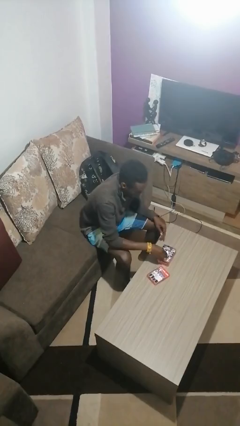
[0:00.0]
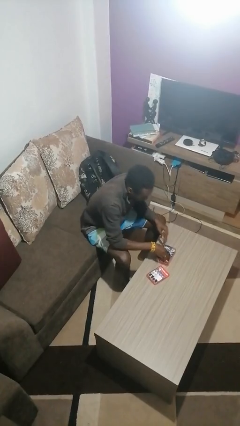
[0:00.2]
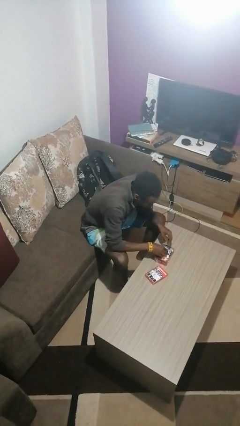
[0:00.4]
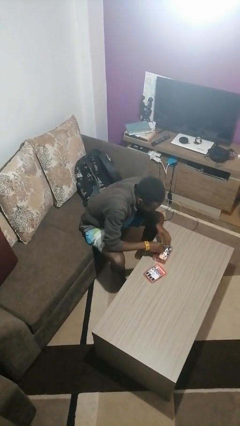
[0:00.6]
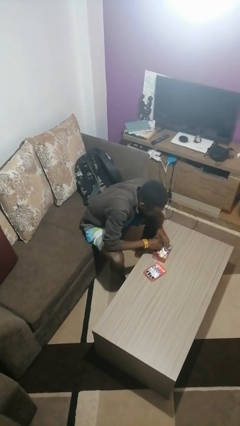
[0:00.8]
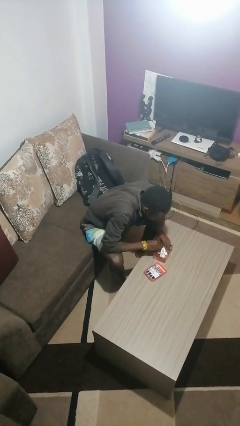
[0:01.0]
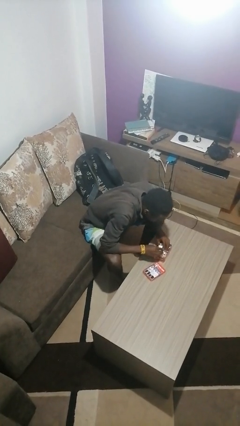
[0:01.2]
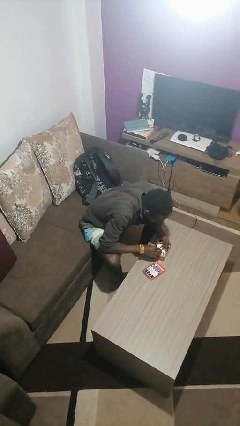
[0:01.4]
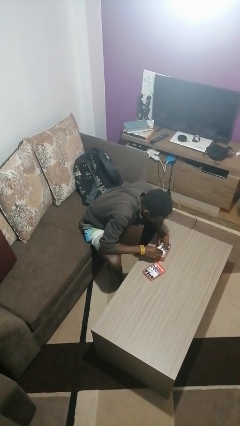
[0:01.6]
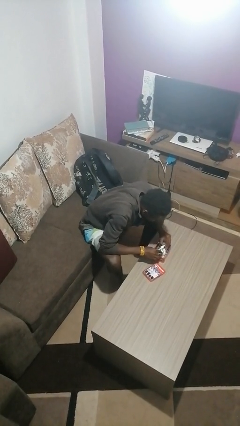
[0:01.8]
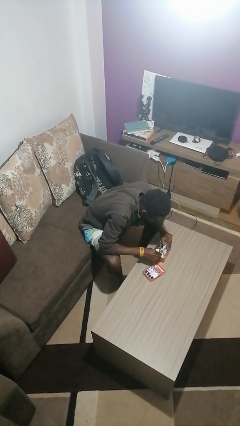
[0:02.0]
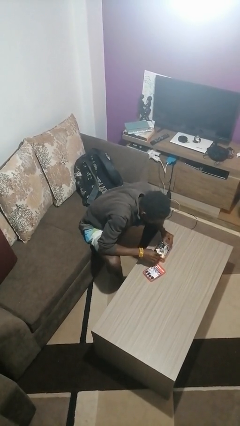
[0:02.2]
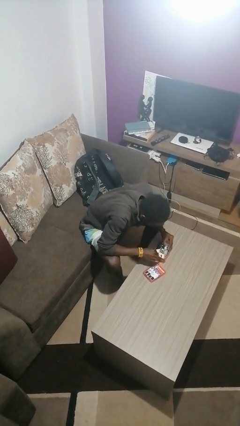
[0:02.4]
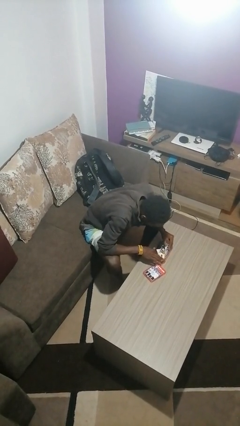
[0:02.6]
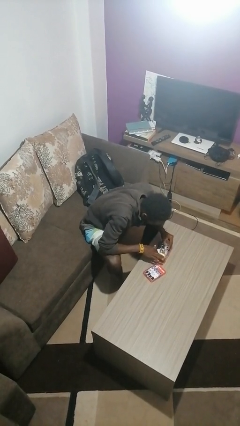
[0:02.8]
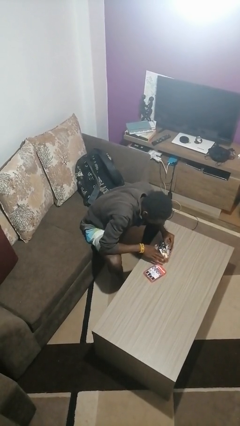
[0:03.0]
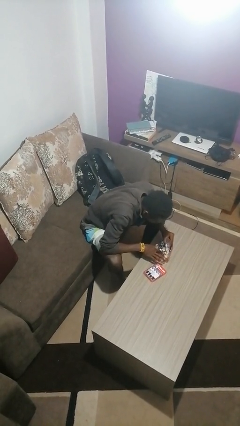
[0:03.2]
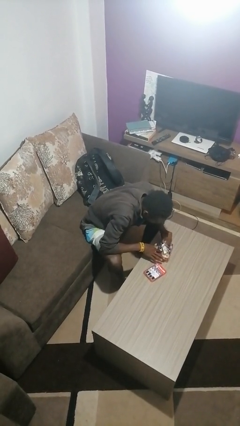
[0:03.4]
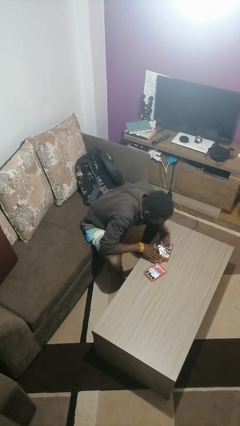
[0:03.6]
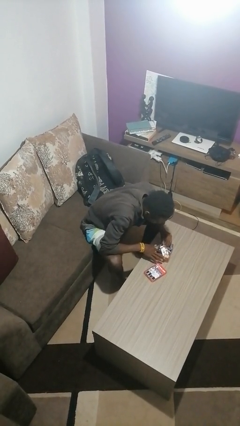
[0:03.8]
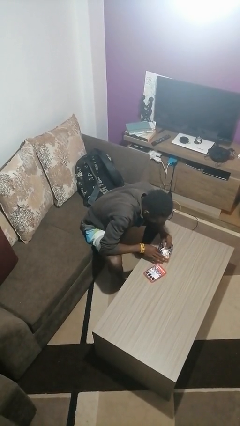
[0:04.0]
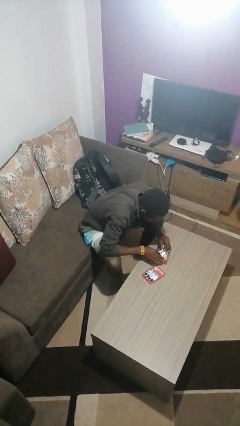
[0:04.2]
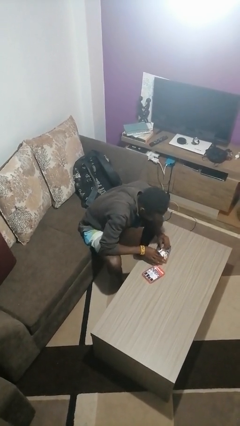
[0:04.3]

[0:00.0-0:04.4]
person searches jewelry box

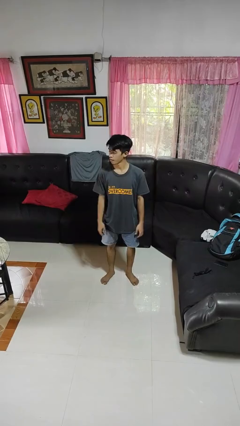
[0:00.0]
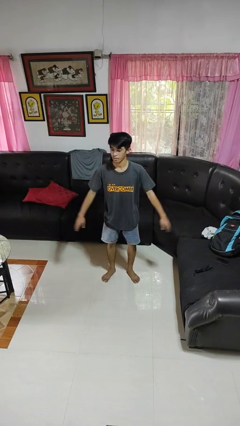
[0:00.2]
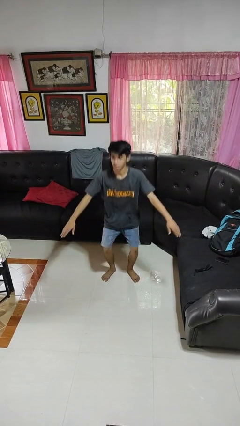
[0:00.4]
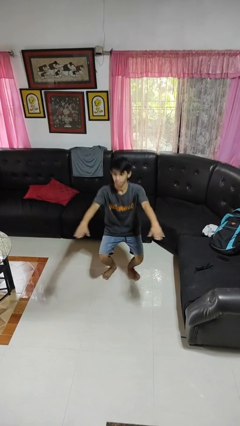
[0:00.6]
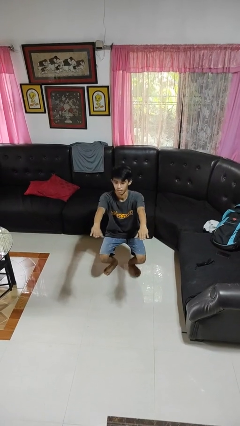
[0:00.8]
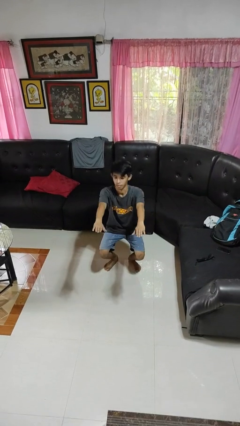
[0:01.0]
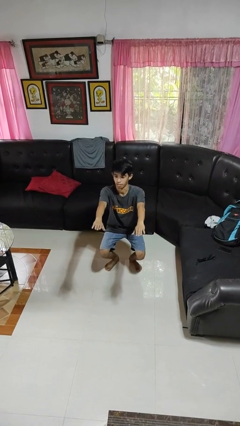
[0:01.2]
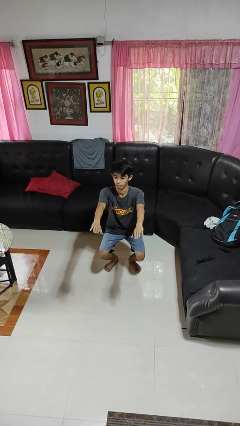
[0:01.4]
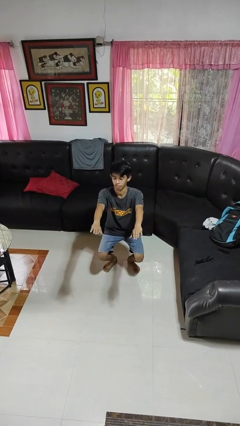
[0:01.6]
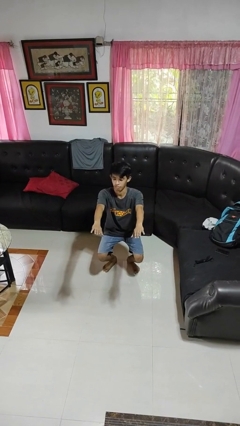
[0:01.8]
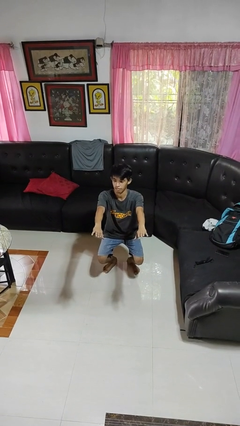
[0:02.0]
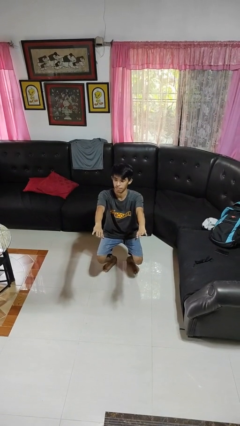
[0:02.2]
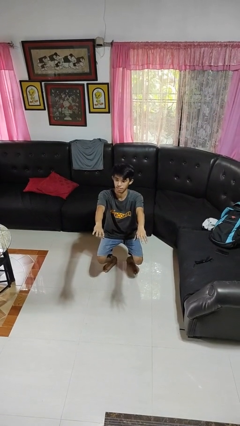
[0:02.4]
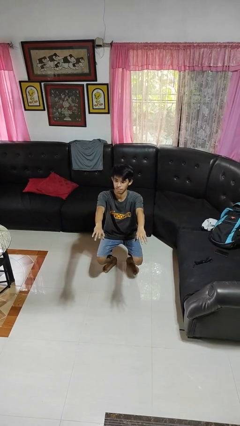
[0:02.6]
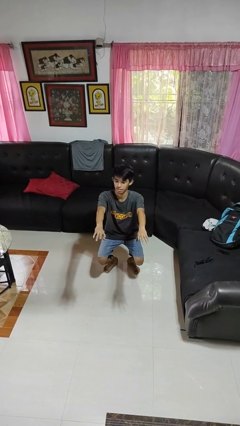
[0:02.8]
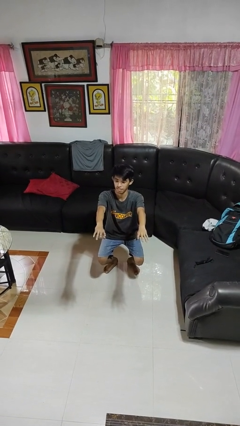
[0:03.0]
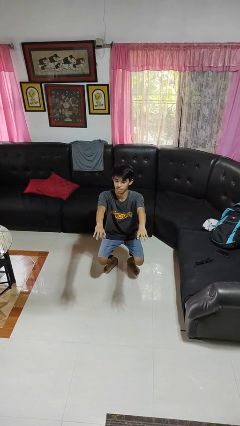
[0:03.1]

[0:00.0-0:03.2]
person squats

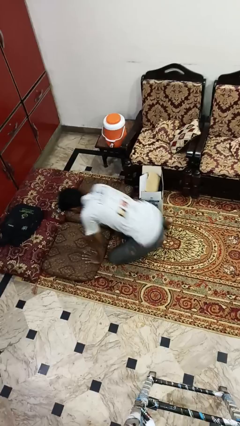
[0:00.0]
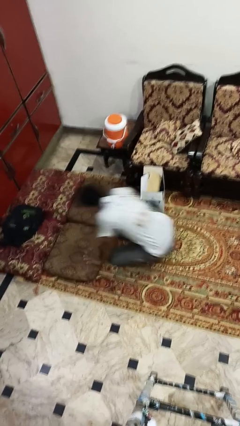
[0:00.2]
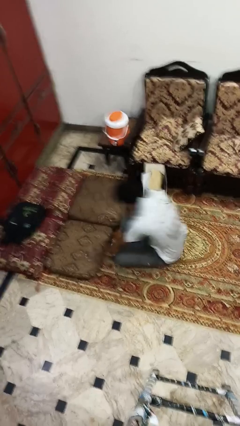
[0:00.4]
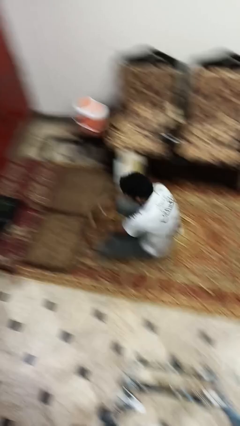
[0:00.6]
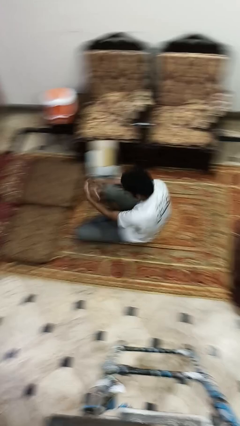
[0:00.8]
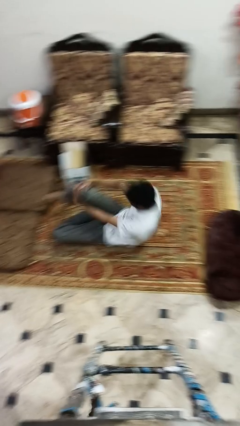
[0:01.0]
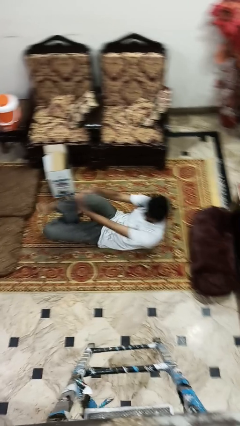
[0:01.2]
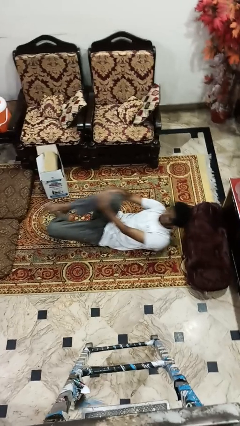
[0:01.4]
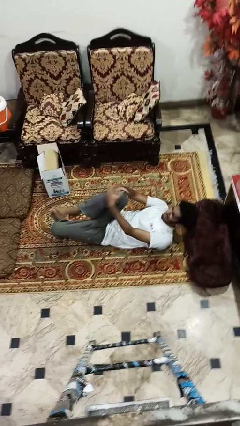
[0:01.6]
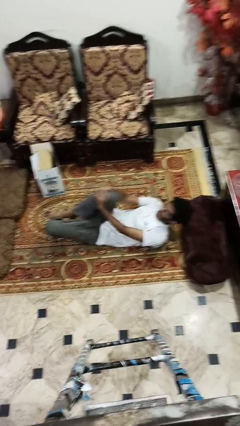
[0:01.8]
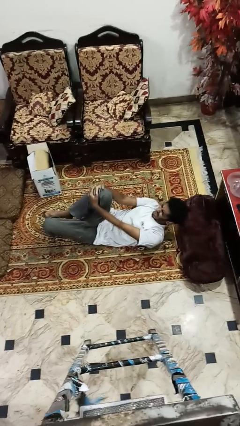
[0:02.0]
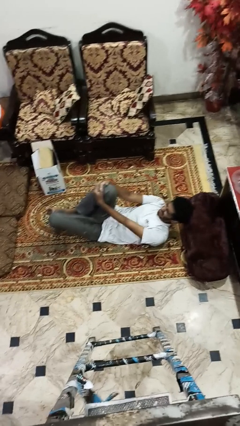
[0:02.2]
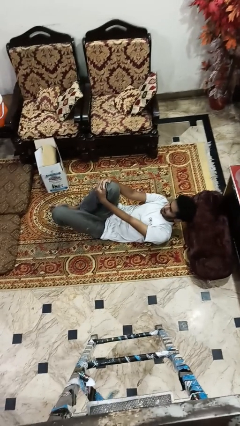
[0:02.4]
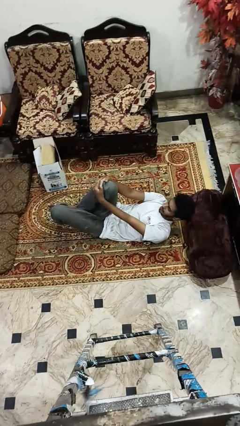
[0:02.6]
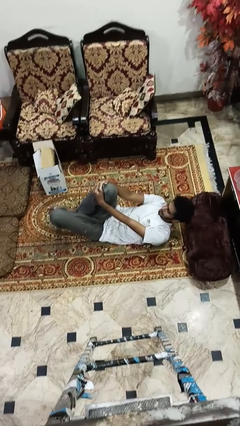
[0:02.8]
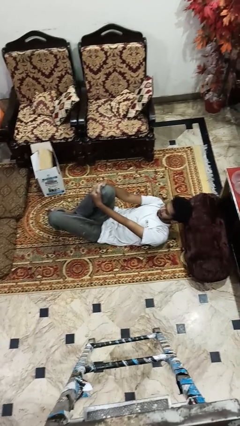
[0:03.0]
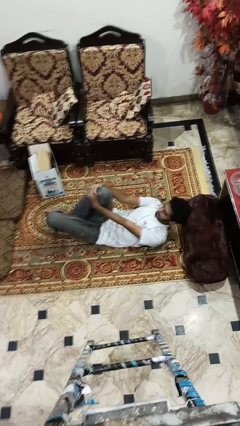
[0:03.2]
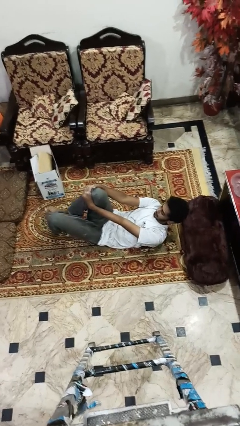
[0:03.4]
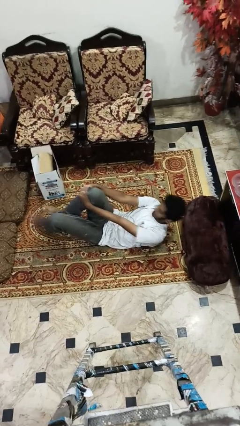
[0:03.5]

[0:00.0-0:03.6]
person lies down on floor

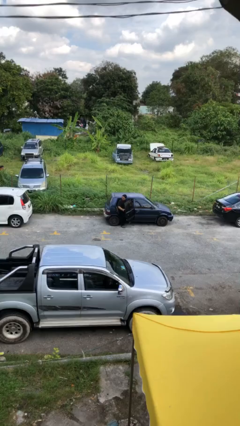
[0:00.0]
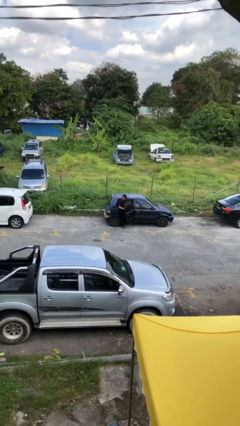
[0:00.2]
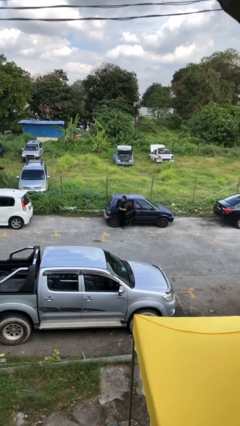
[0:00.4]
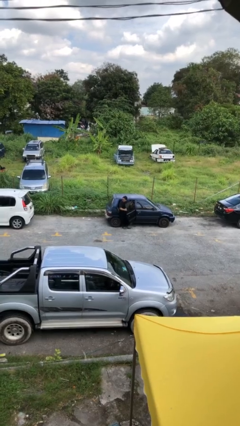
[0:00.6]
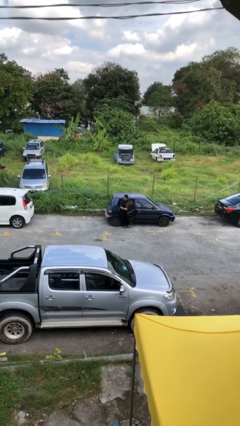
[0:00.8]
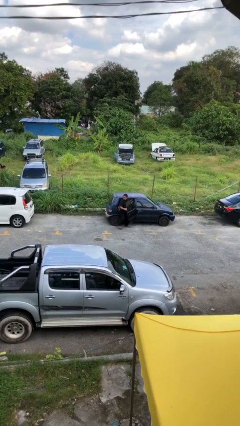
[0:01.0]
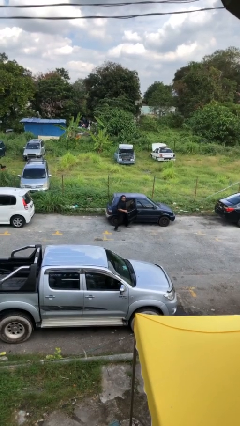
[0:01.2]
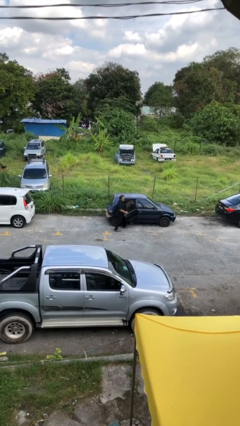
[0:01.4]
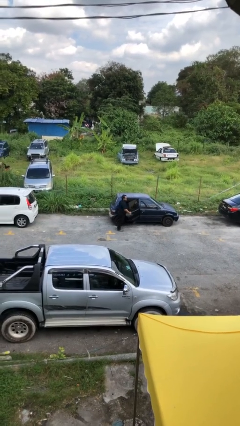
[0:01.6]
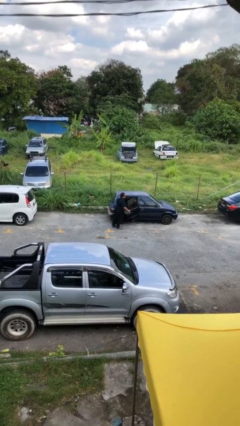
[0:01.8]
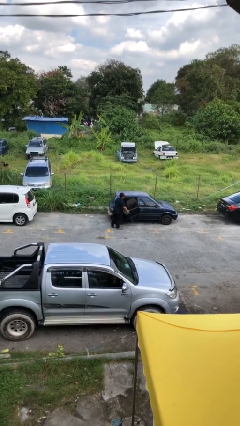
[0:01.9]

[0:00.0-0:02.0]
person exits car

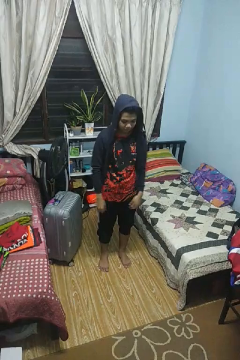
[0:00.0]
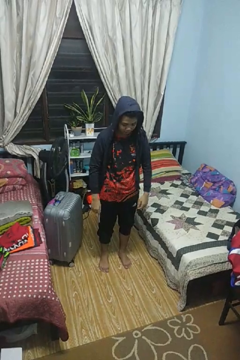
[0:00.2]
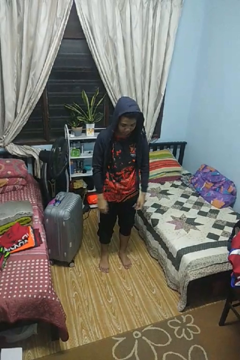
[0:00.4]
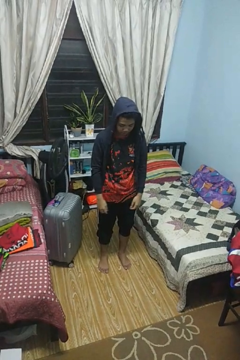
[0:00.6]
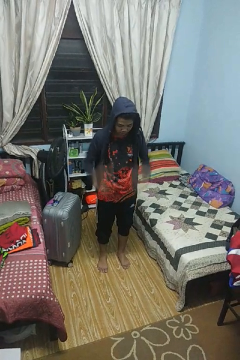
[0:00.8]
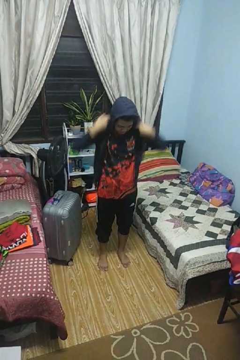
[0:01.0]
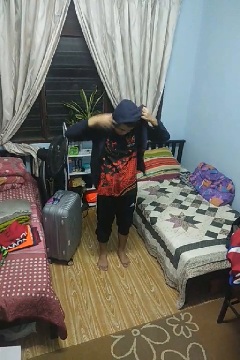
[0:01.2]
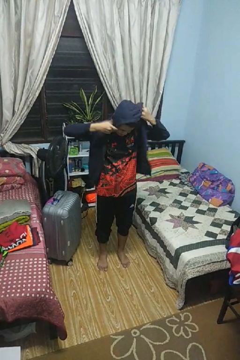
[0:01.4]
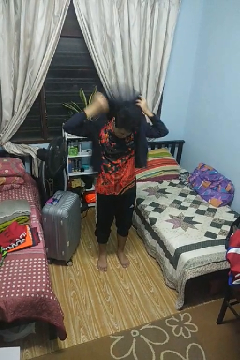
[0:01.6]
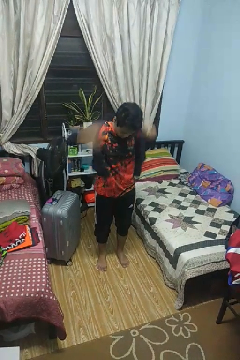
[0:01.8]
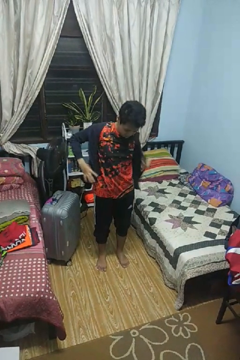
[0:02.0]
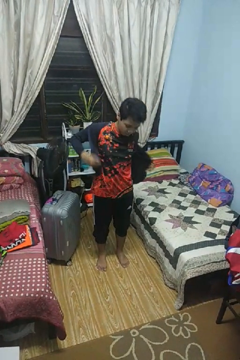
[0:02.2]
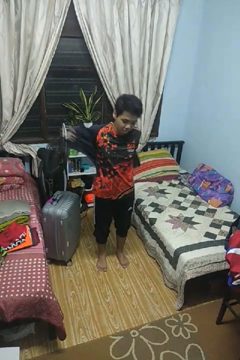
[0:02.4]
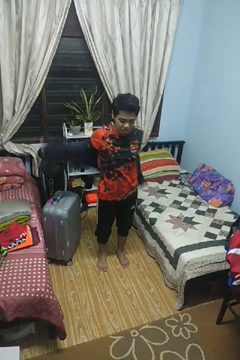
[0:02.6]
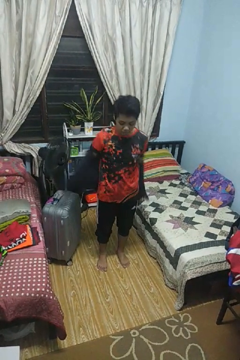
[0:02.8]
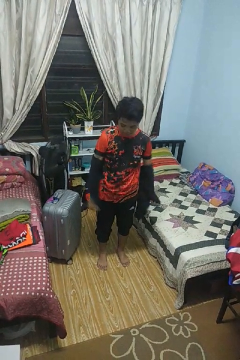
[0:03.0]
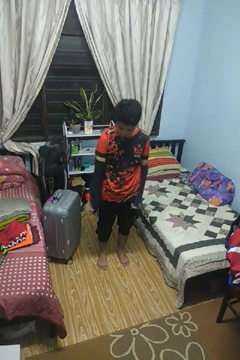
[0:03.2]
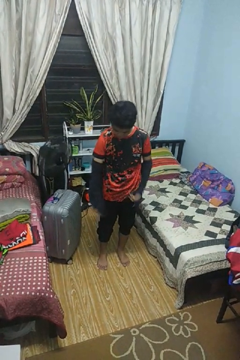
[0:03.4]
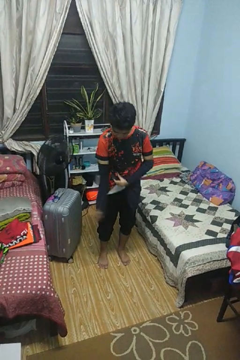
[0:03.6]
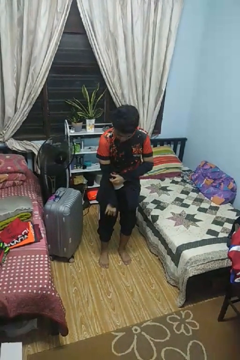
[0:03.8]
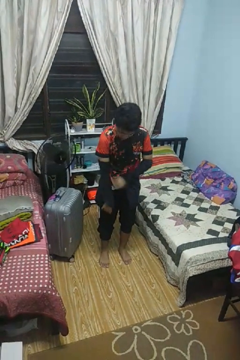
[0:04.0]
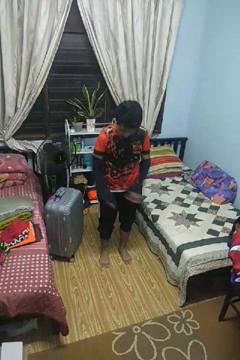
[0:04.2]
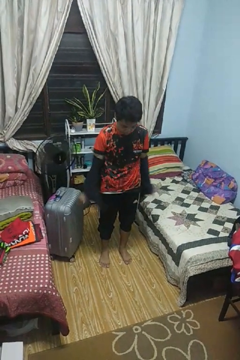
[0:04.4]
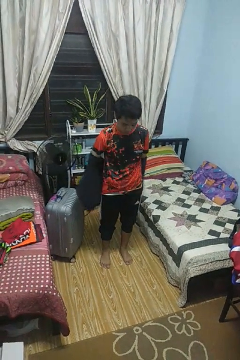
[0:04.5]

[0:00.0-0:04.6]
person takes off hoodie

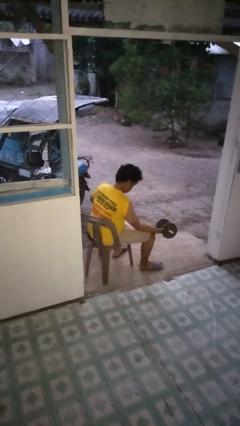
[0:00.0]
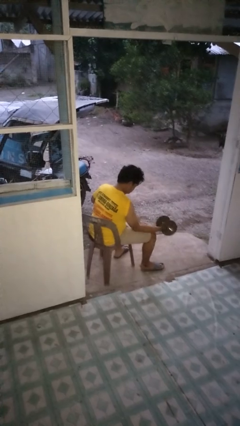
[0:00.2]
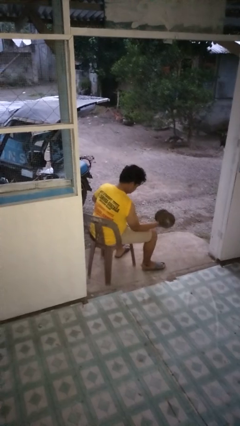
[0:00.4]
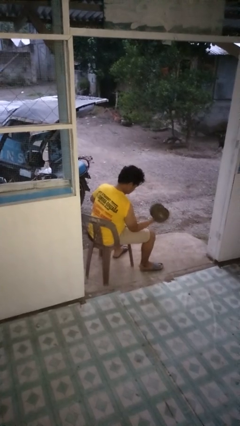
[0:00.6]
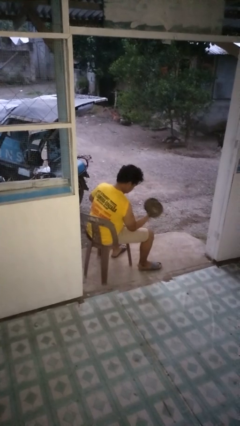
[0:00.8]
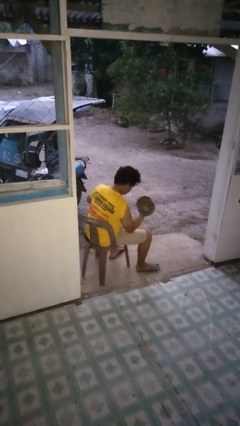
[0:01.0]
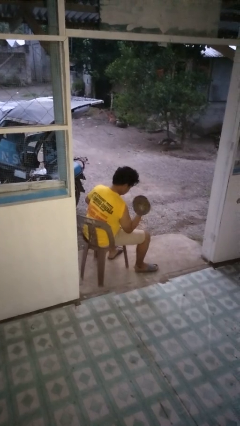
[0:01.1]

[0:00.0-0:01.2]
person lifts dumbbells
